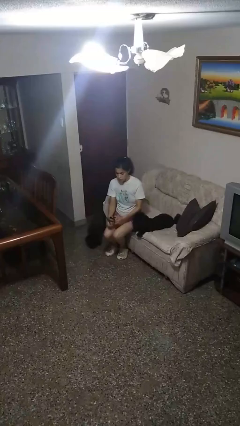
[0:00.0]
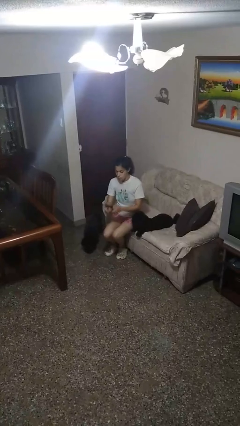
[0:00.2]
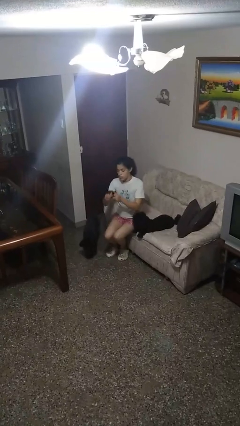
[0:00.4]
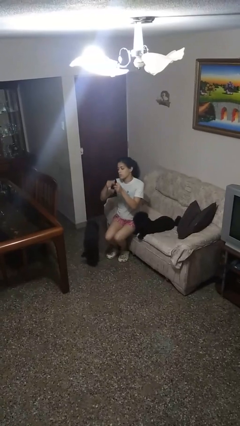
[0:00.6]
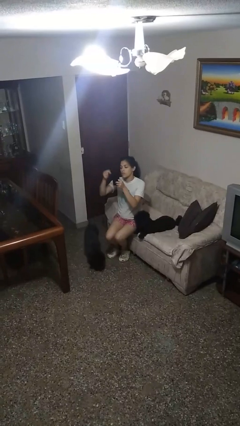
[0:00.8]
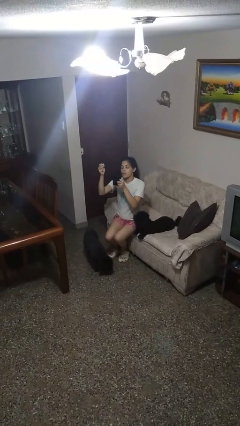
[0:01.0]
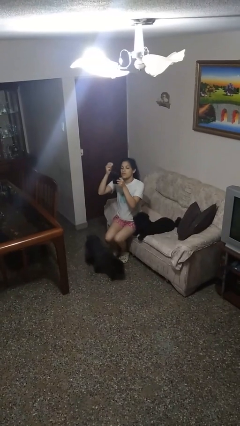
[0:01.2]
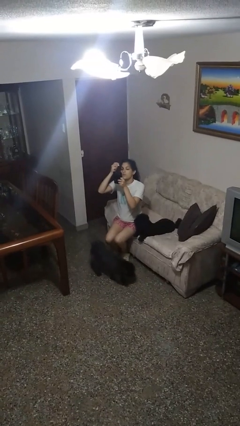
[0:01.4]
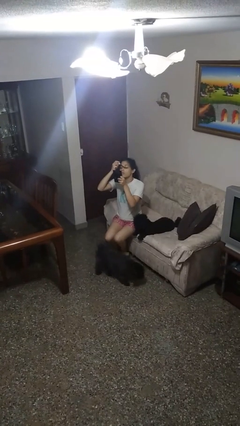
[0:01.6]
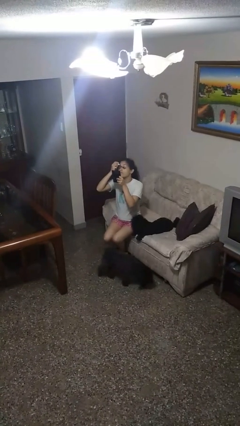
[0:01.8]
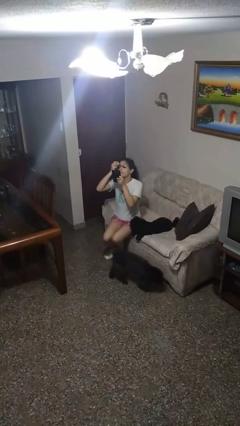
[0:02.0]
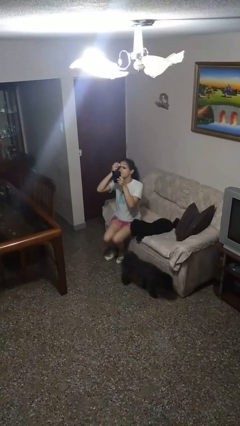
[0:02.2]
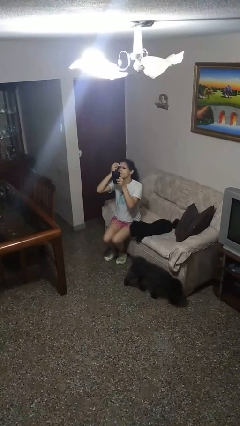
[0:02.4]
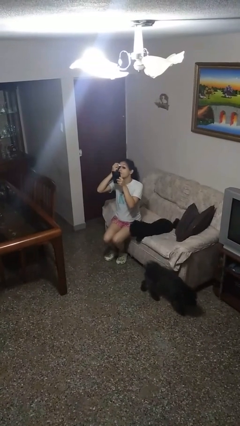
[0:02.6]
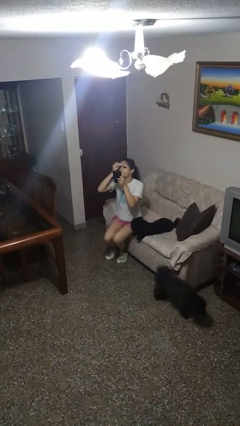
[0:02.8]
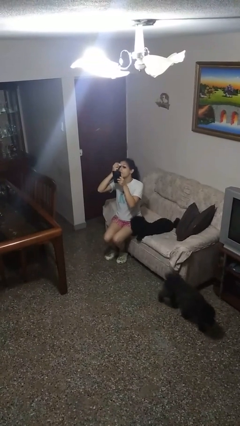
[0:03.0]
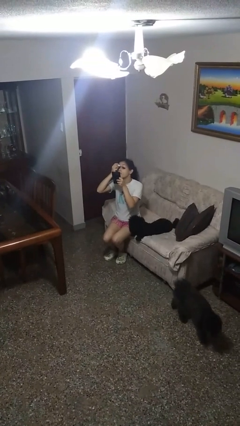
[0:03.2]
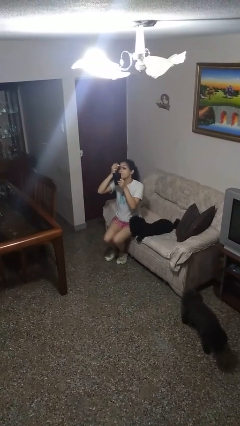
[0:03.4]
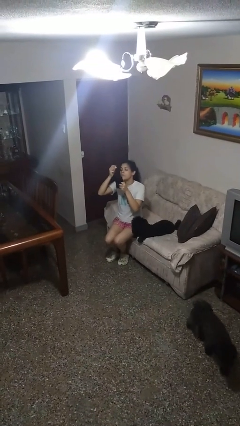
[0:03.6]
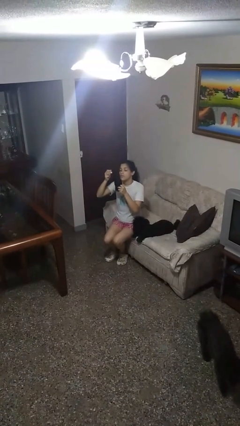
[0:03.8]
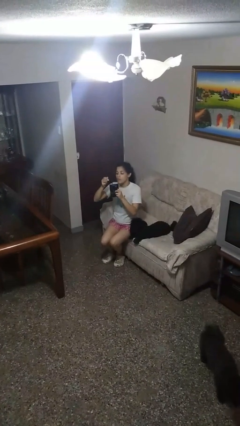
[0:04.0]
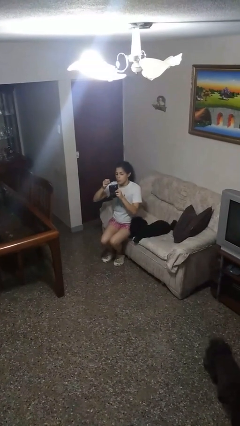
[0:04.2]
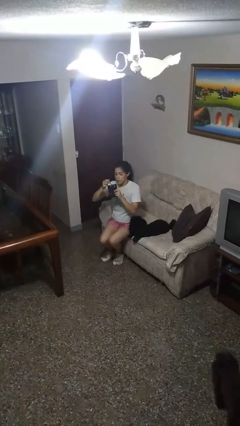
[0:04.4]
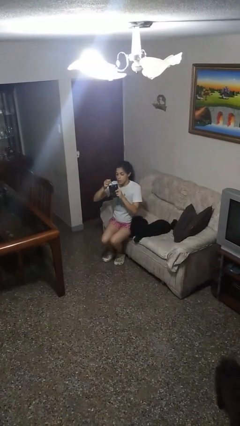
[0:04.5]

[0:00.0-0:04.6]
person applies eye makeup

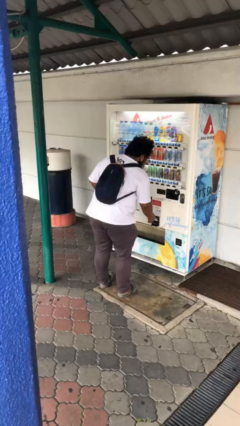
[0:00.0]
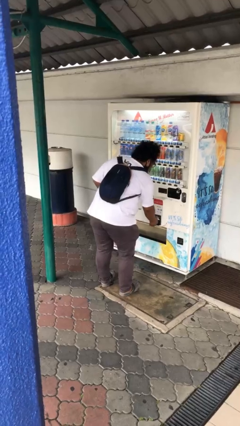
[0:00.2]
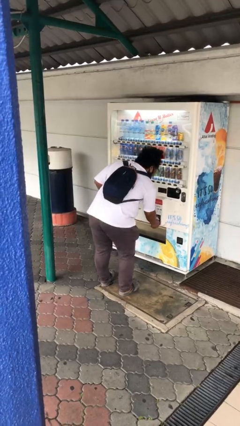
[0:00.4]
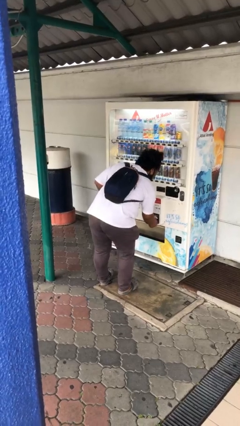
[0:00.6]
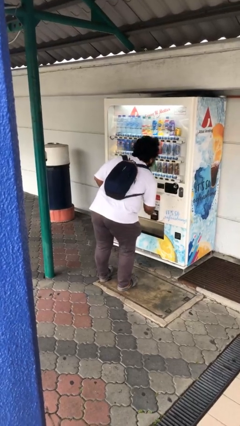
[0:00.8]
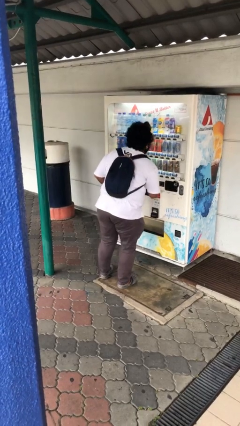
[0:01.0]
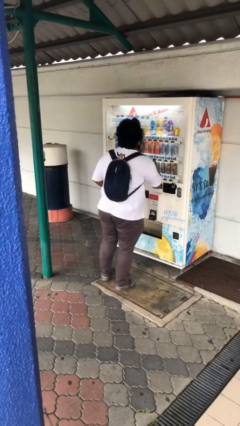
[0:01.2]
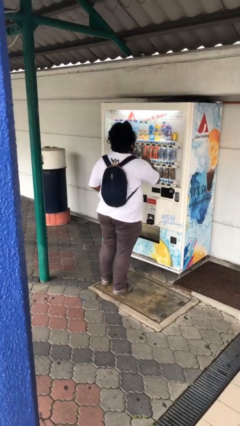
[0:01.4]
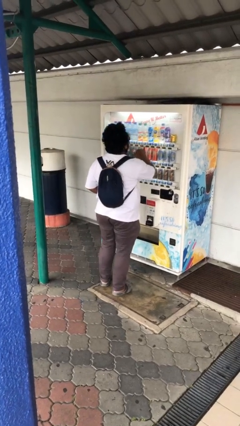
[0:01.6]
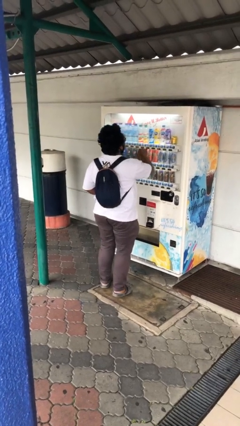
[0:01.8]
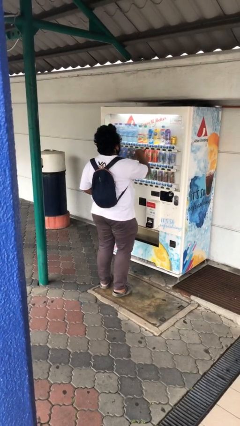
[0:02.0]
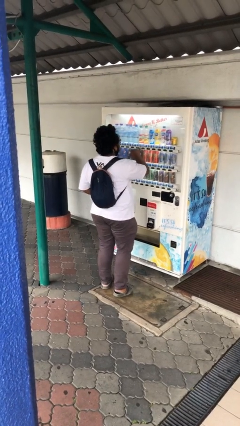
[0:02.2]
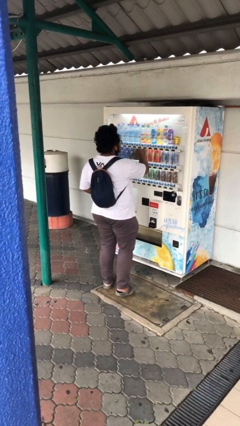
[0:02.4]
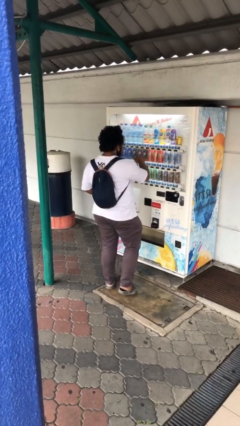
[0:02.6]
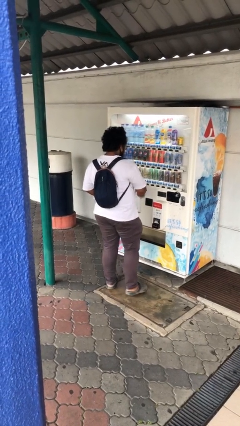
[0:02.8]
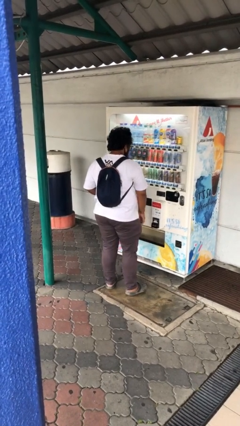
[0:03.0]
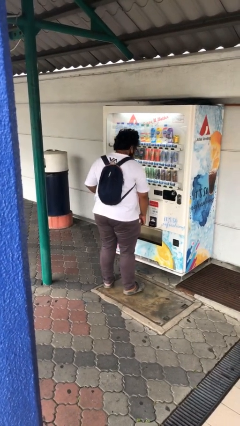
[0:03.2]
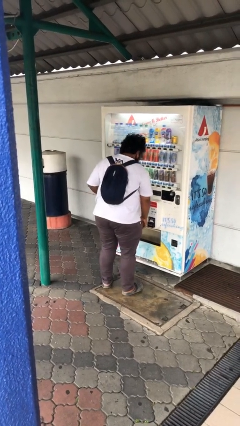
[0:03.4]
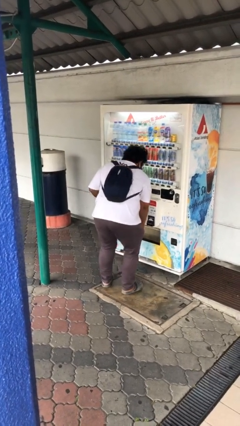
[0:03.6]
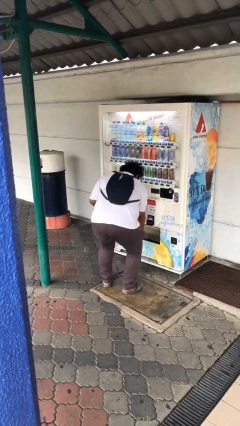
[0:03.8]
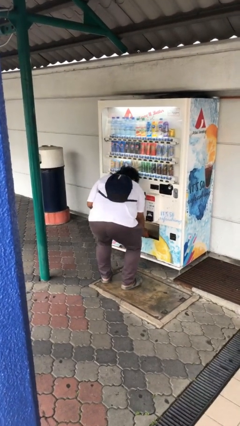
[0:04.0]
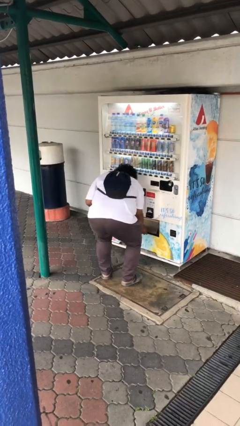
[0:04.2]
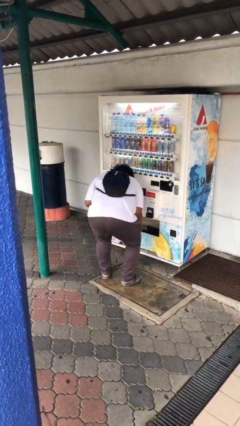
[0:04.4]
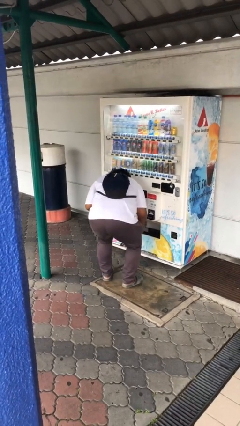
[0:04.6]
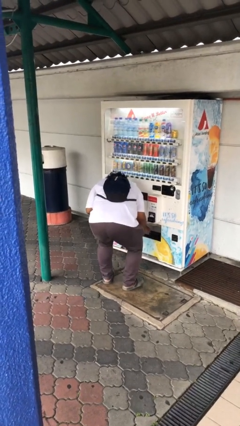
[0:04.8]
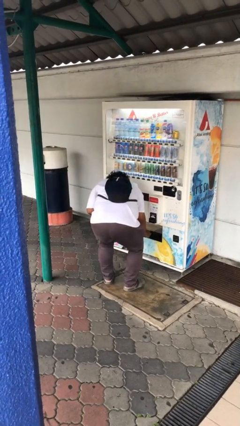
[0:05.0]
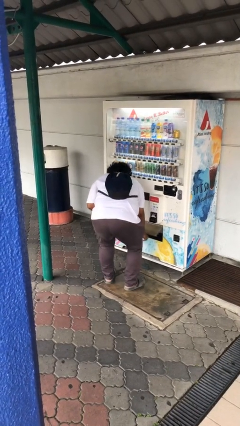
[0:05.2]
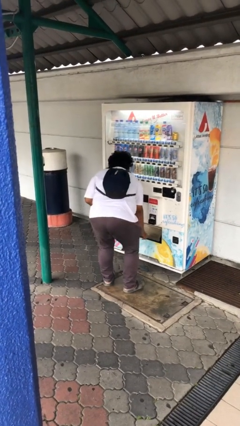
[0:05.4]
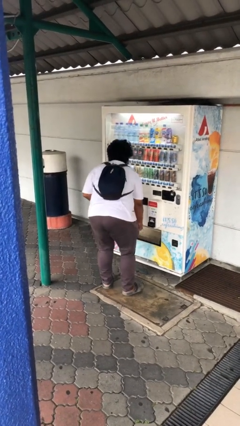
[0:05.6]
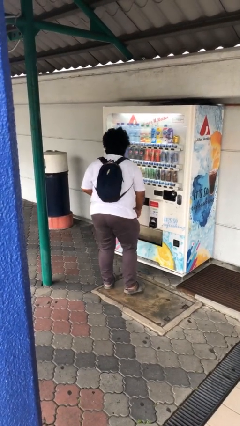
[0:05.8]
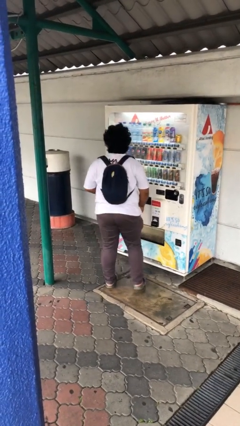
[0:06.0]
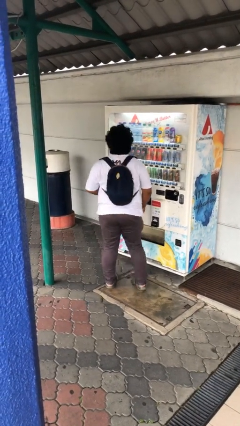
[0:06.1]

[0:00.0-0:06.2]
person purchases from machine

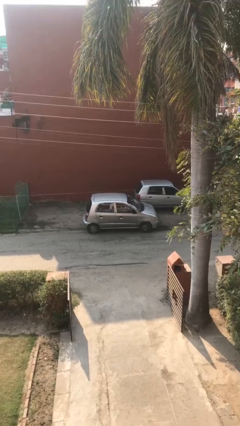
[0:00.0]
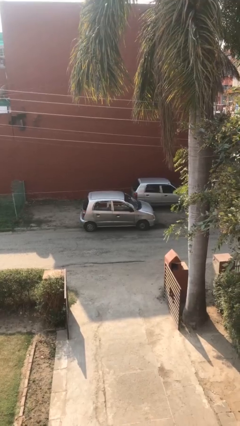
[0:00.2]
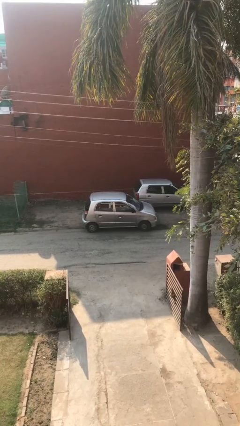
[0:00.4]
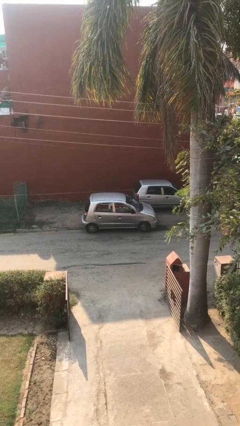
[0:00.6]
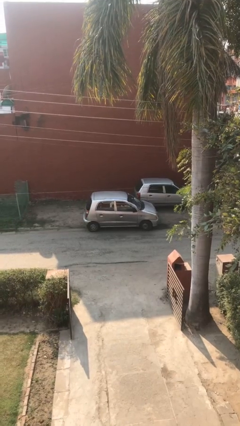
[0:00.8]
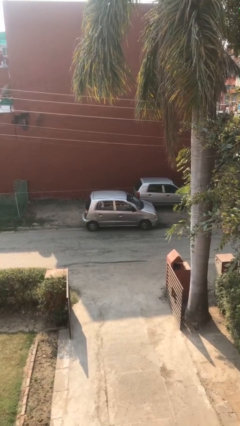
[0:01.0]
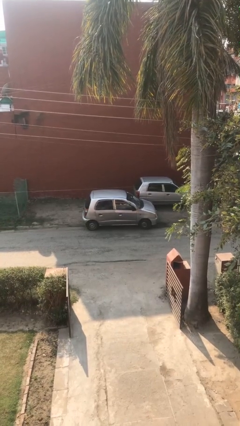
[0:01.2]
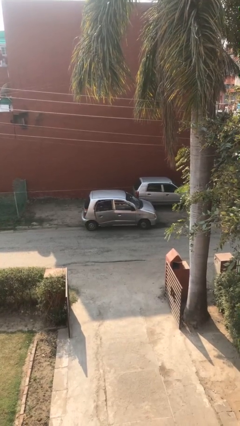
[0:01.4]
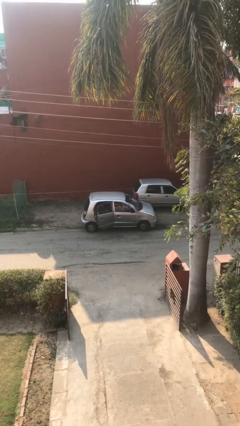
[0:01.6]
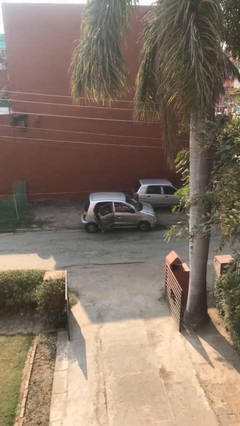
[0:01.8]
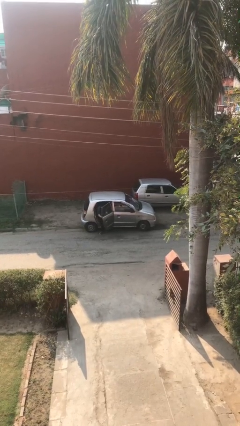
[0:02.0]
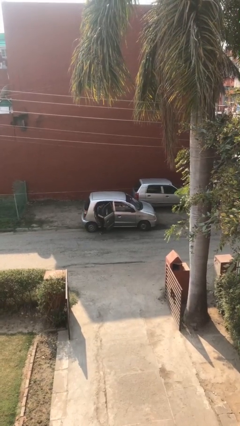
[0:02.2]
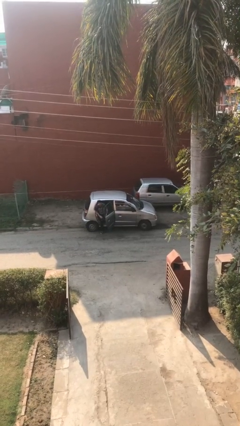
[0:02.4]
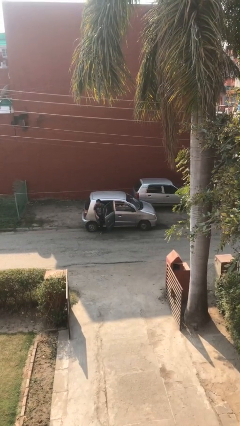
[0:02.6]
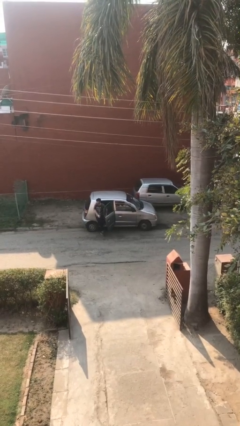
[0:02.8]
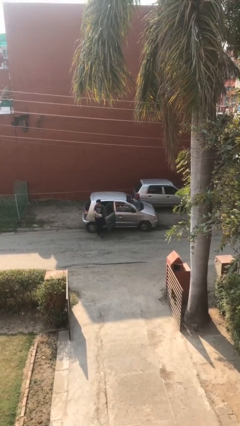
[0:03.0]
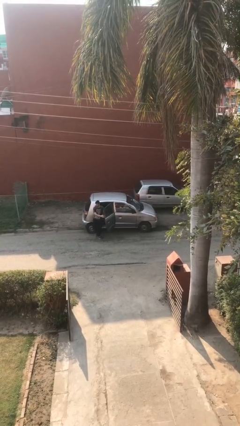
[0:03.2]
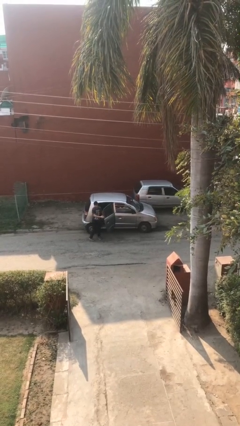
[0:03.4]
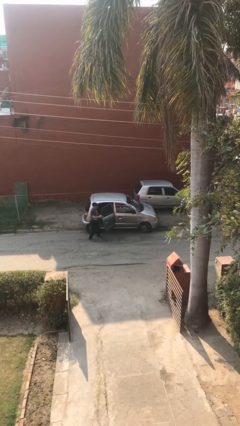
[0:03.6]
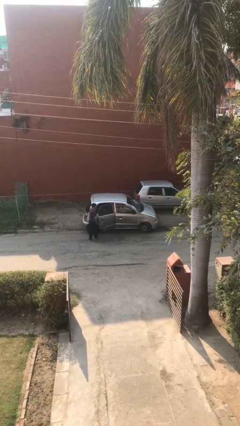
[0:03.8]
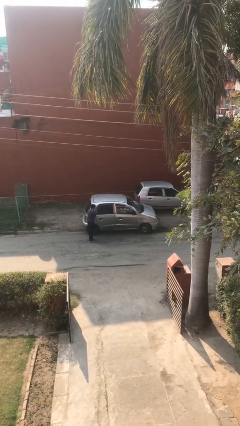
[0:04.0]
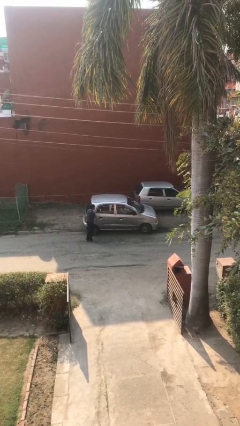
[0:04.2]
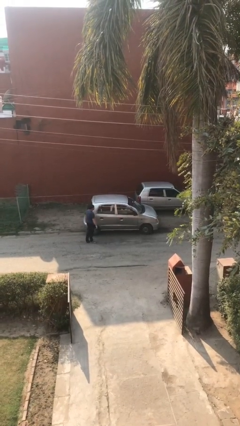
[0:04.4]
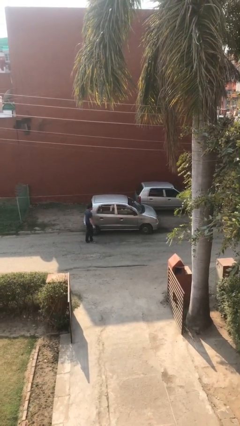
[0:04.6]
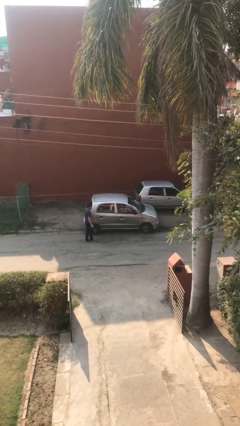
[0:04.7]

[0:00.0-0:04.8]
car drops off person

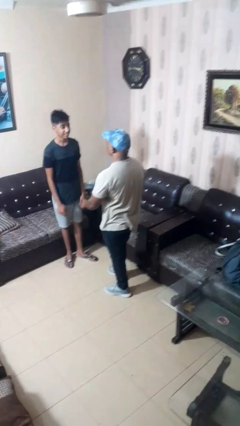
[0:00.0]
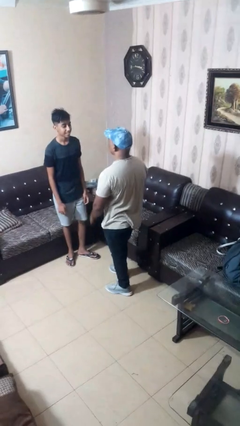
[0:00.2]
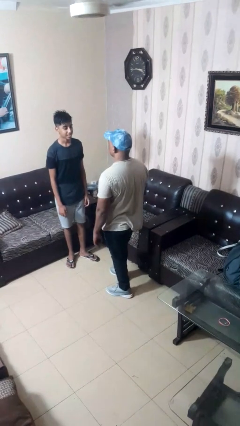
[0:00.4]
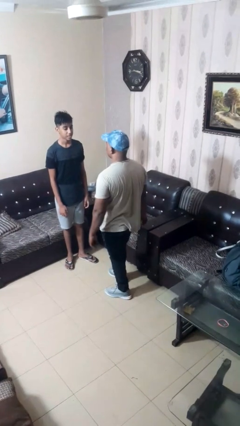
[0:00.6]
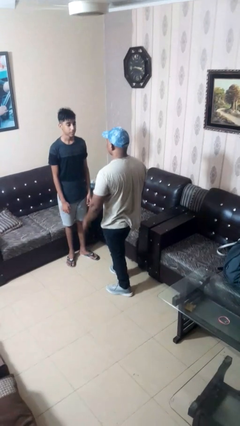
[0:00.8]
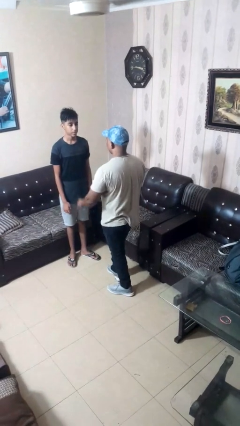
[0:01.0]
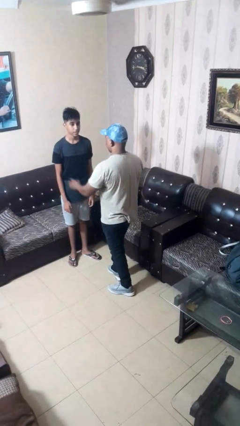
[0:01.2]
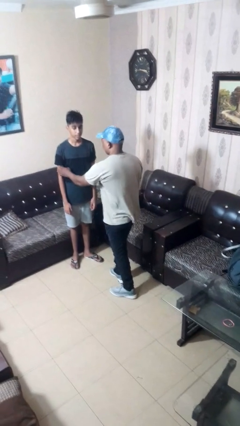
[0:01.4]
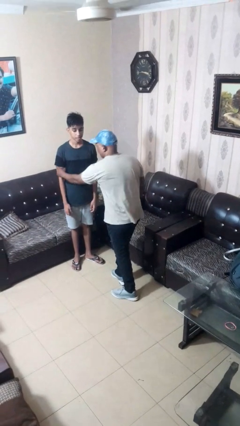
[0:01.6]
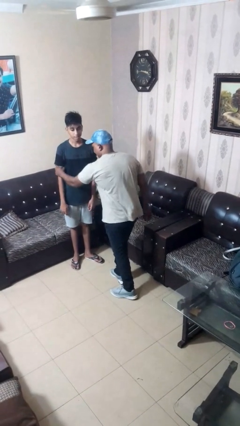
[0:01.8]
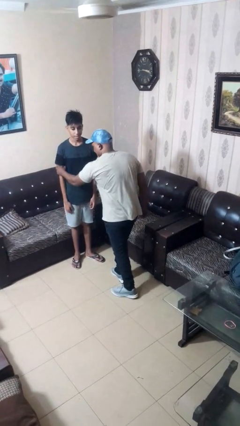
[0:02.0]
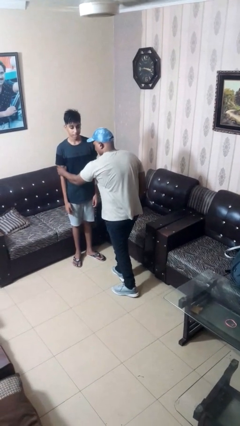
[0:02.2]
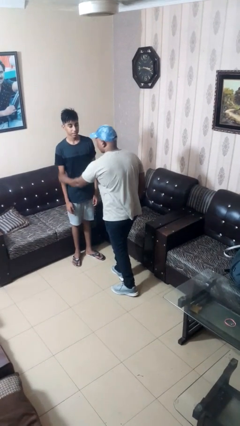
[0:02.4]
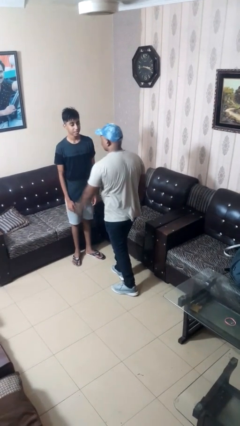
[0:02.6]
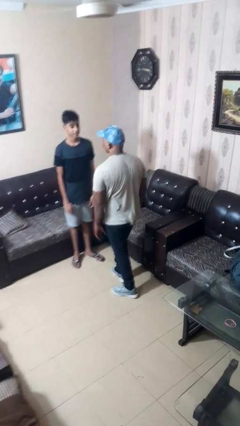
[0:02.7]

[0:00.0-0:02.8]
person grabs person by bicep
